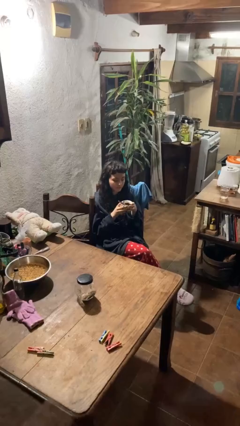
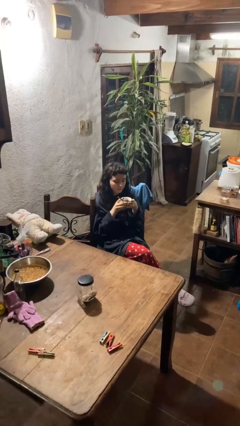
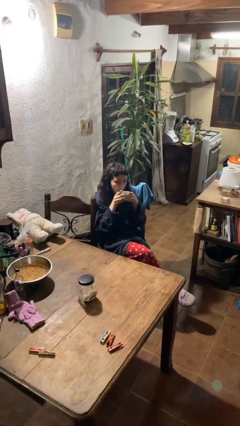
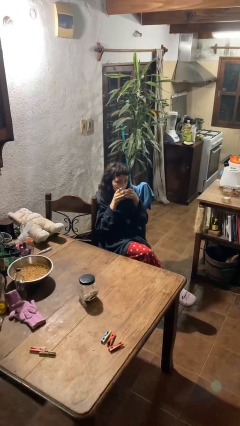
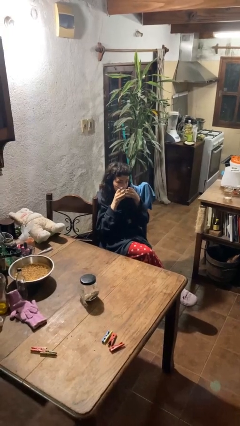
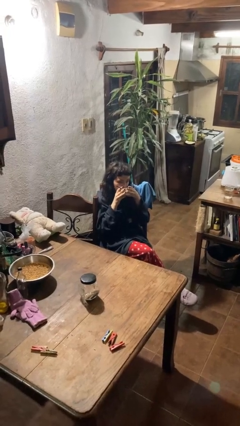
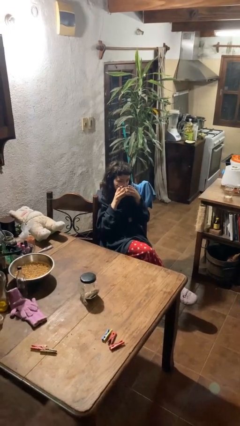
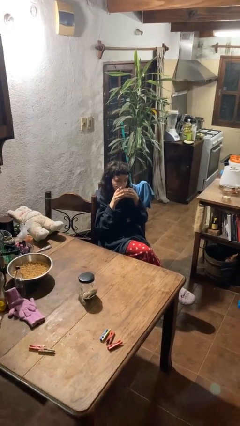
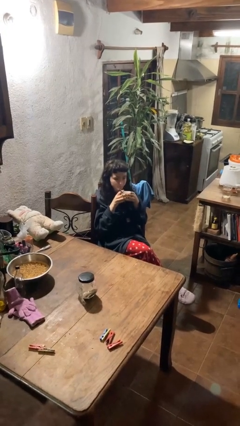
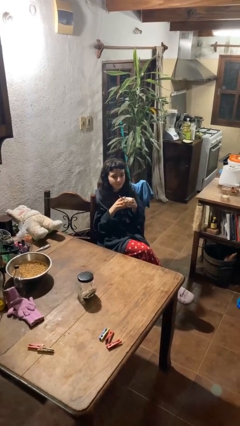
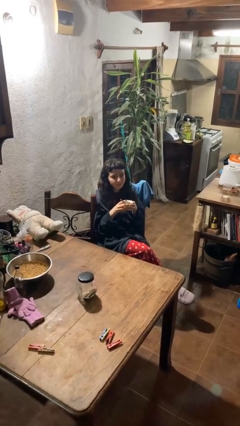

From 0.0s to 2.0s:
person drinks from mug

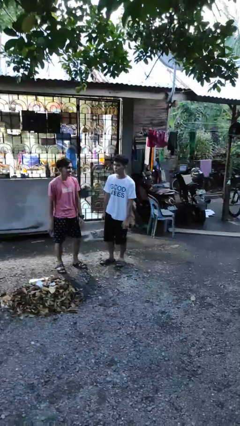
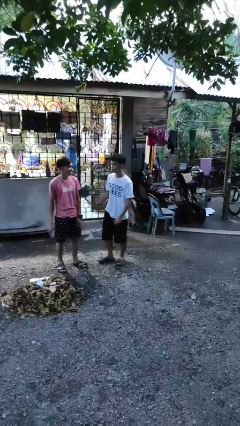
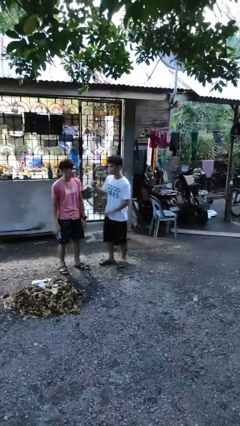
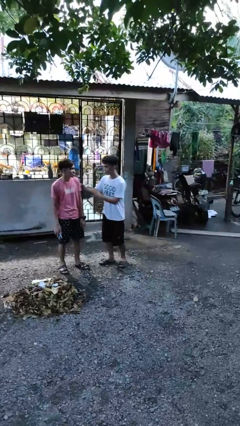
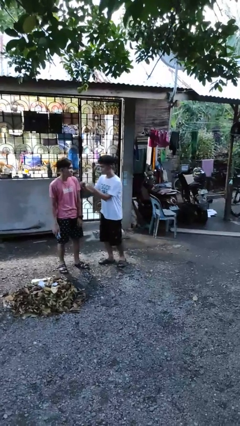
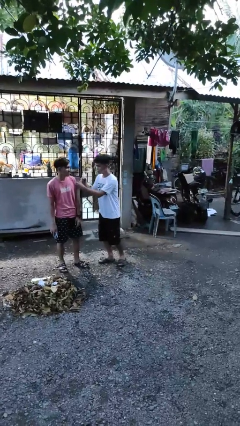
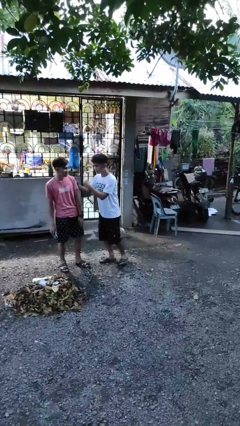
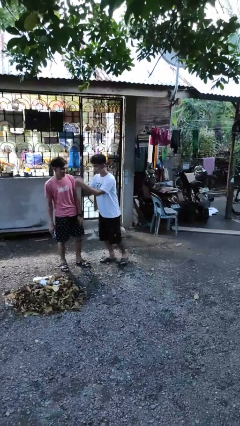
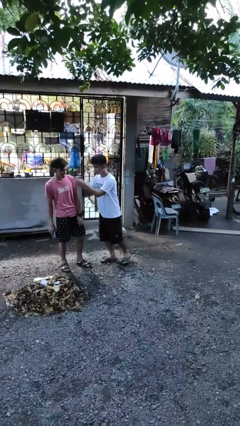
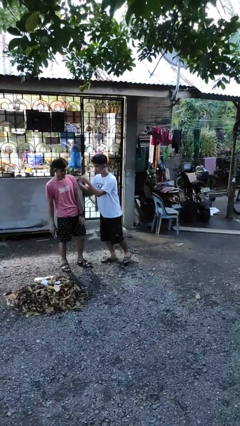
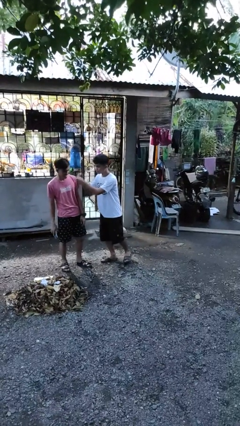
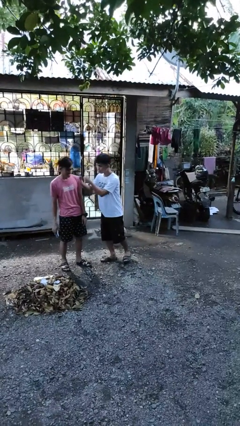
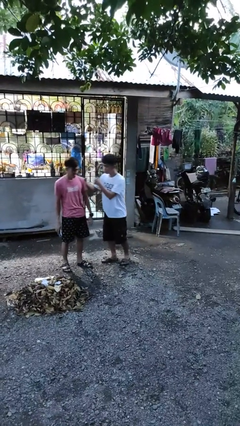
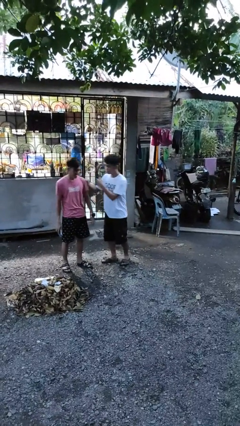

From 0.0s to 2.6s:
person pounds shoulders of person

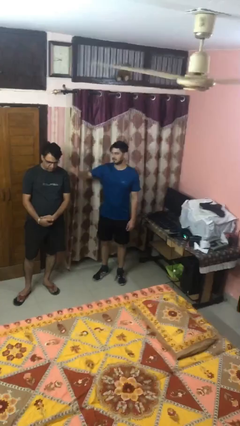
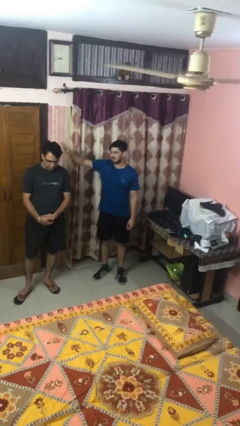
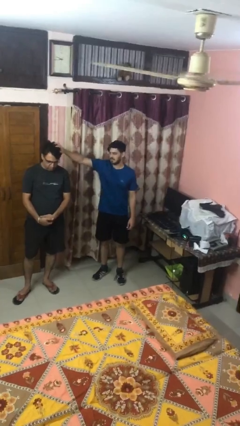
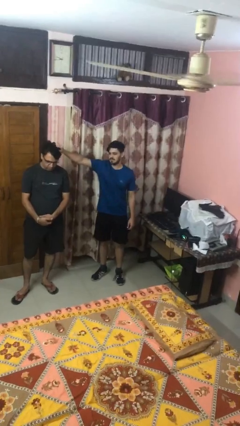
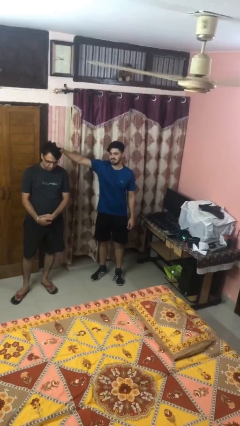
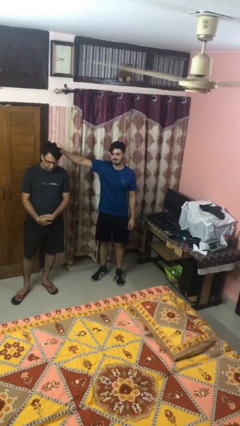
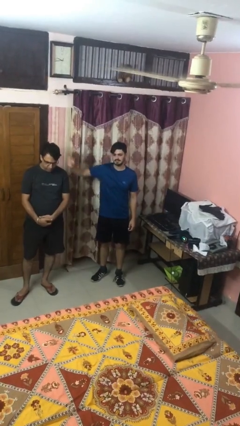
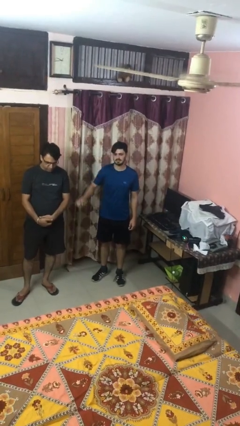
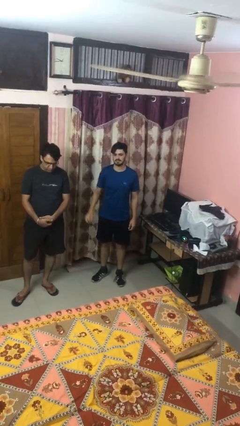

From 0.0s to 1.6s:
person grabs person by hair

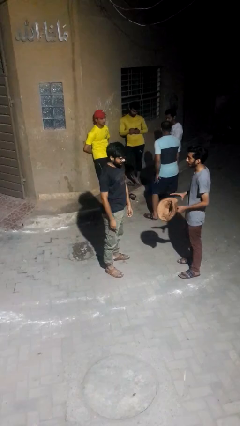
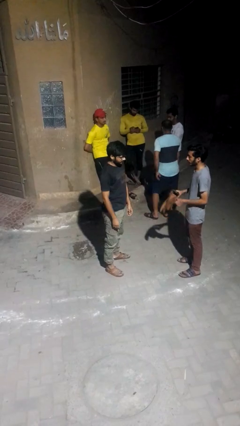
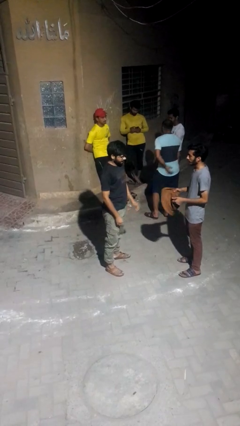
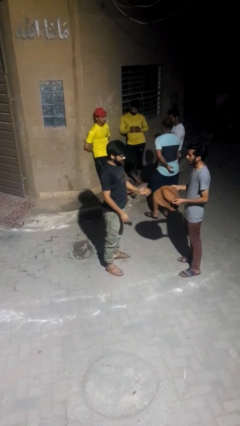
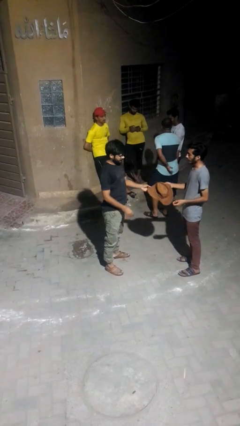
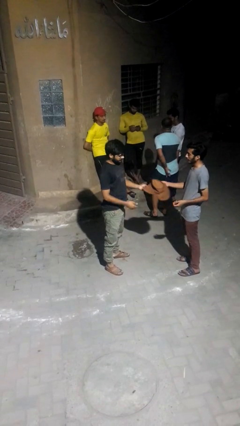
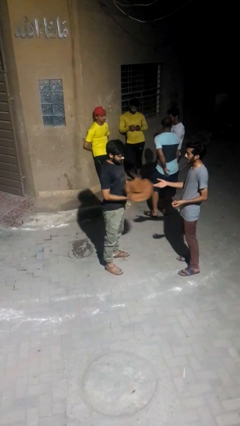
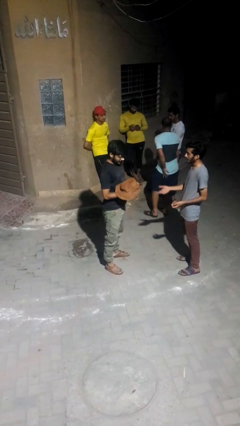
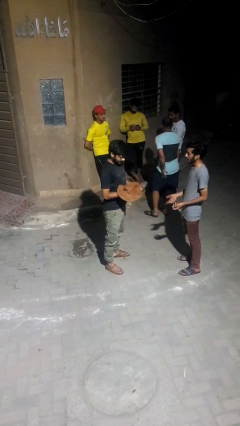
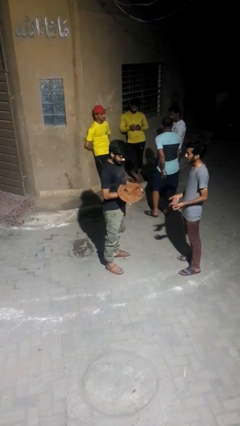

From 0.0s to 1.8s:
person transfers object to person

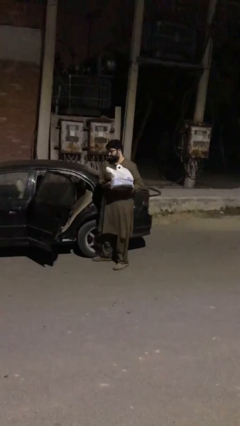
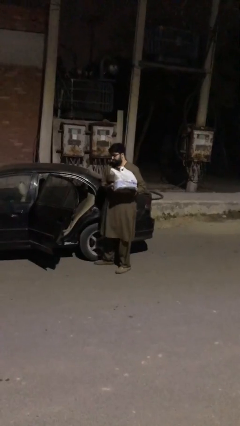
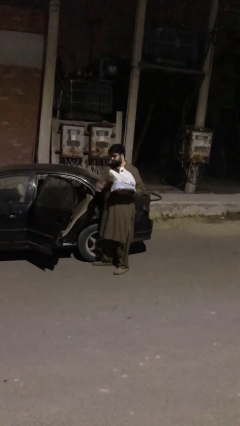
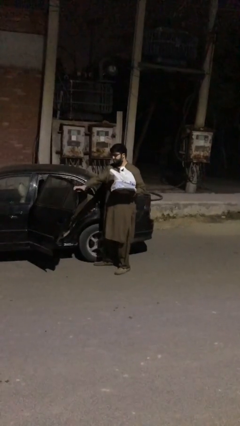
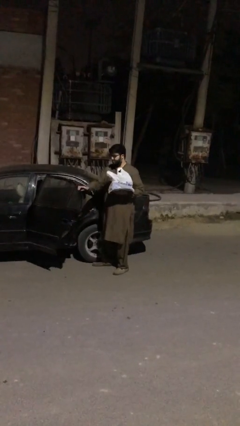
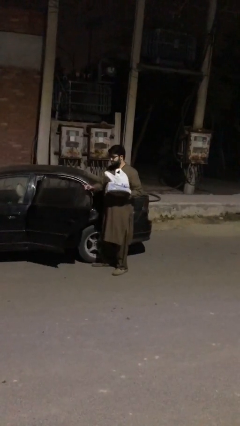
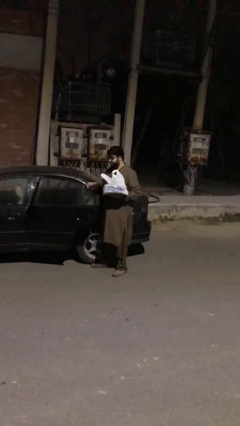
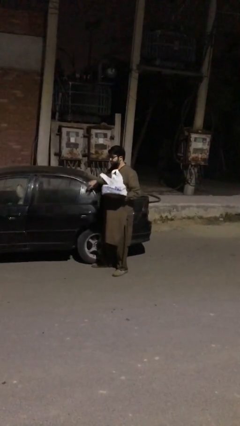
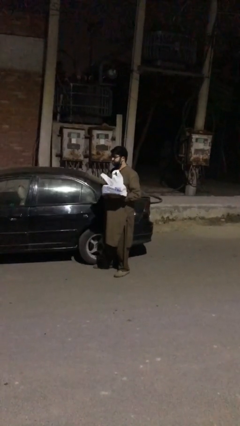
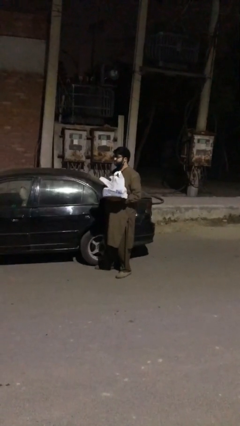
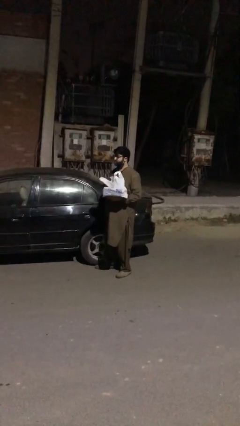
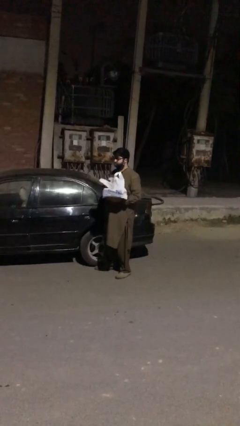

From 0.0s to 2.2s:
person closes car door

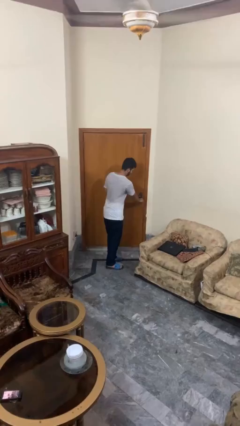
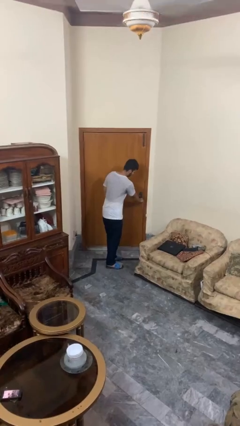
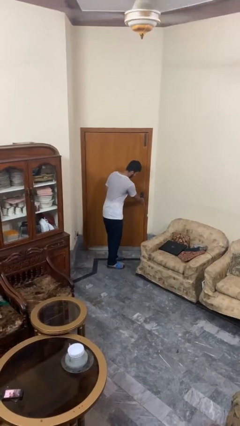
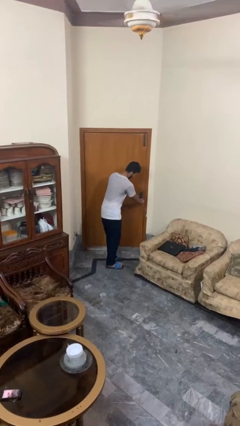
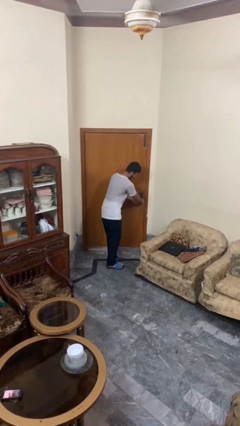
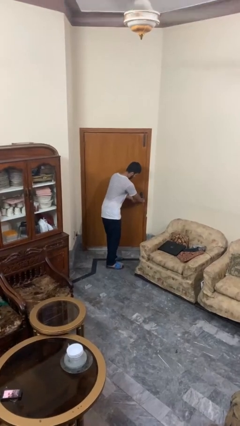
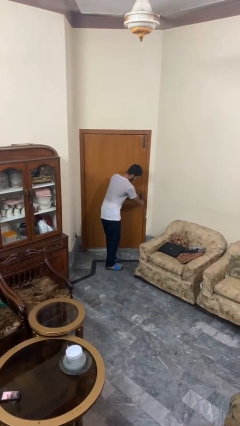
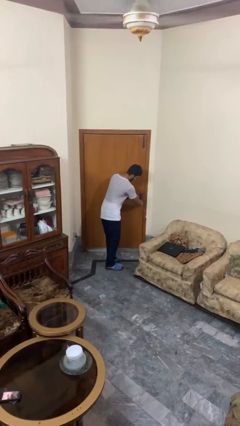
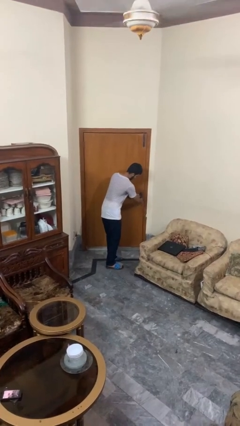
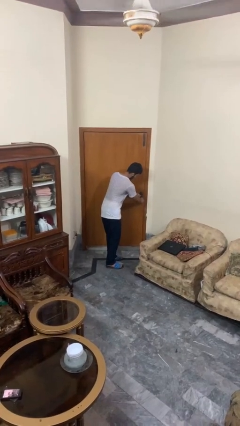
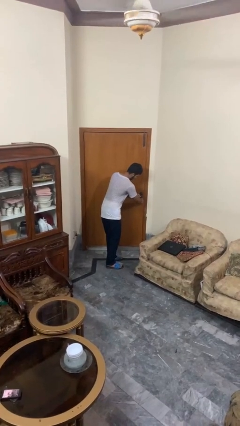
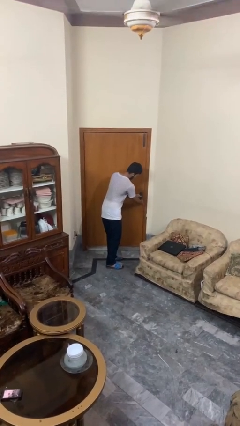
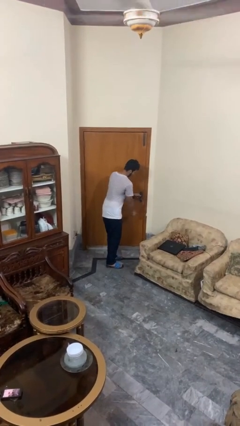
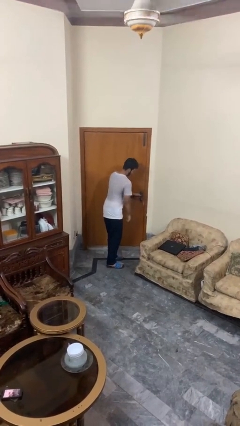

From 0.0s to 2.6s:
person locks door with keys

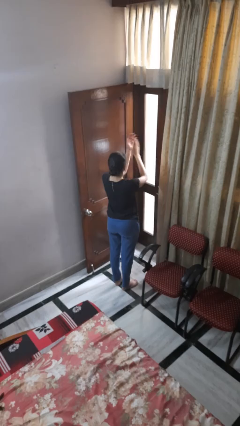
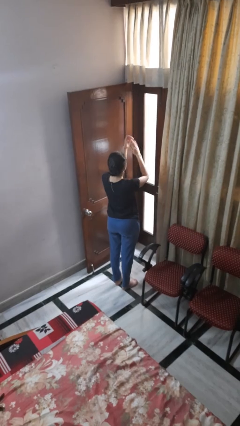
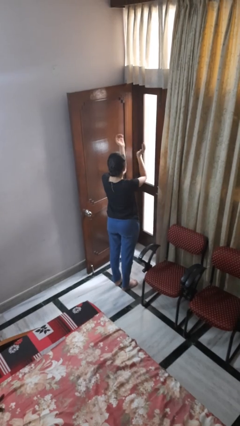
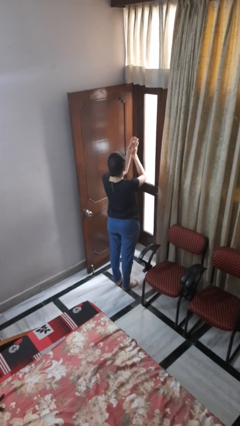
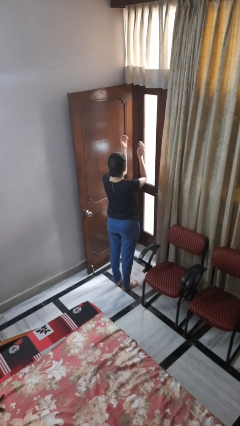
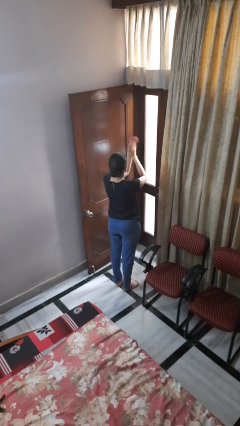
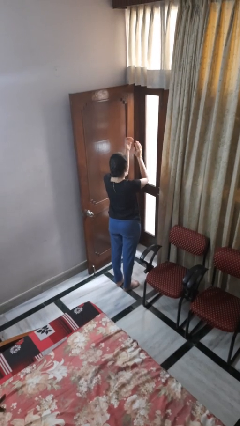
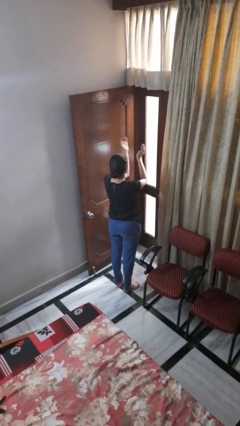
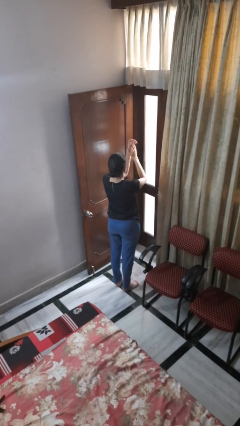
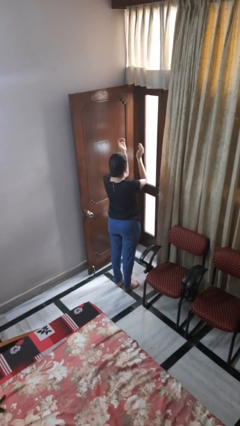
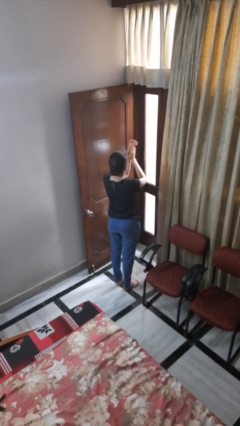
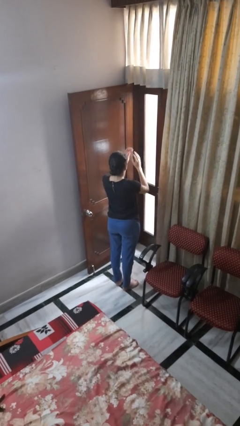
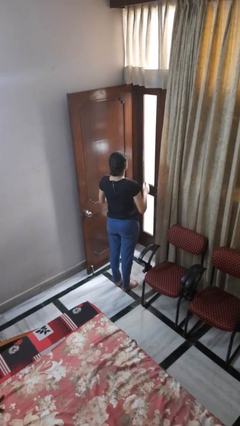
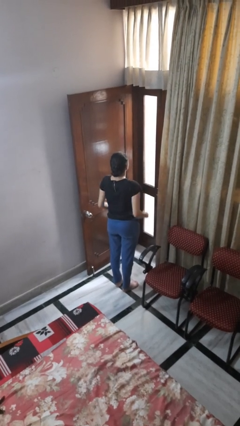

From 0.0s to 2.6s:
person claps hands

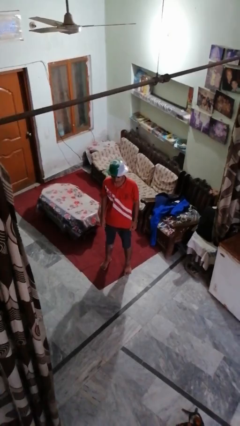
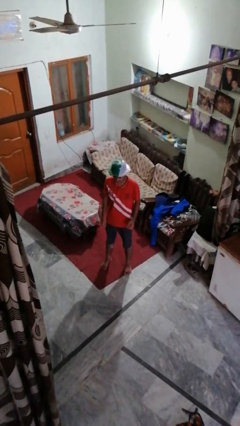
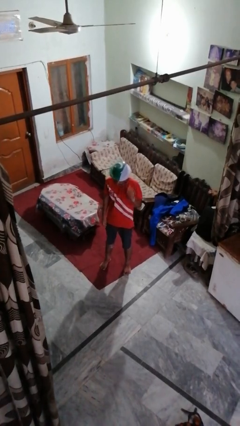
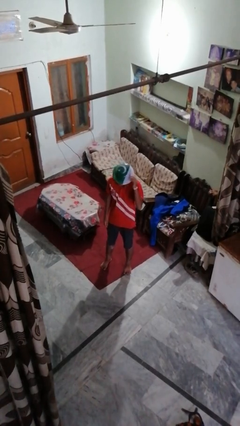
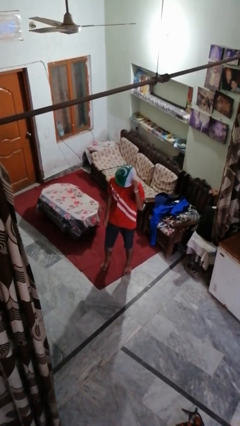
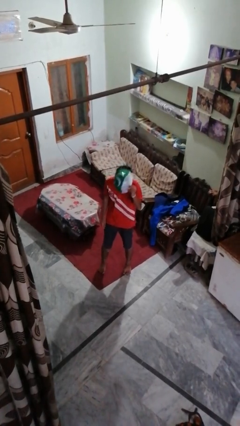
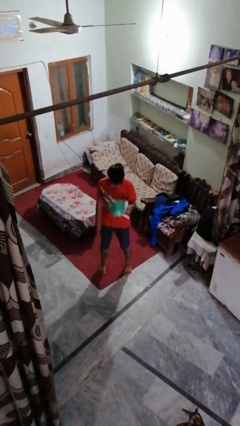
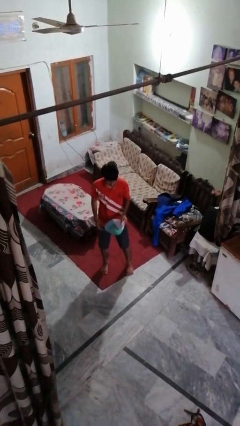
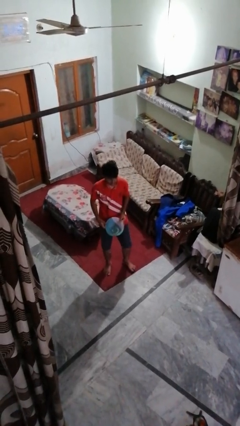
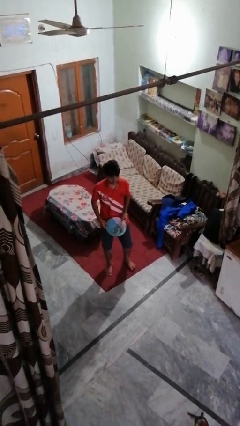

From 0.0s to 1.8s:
person takes off hat
